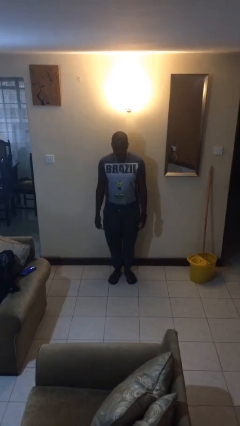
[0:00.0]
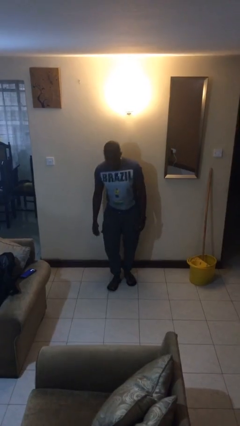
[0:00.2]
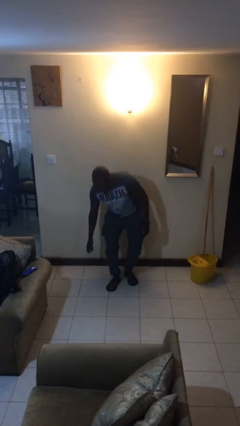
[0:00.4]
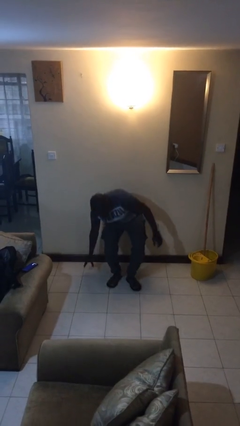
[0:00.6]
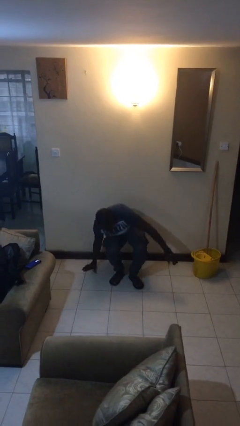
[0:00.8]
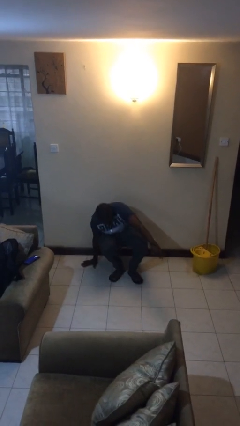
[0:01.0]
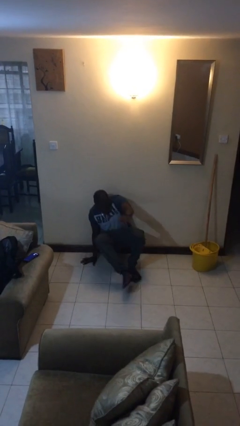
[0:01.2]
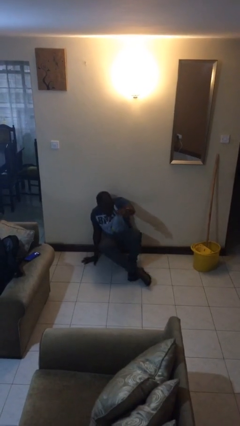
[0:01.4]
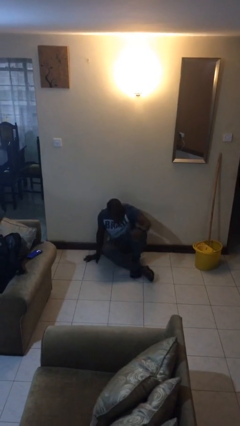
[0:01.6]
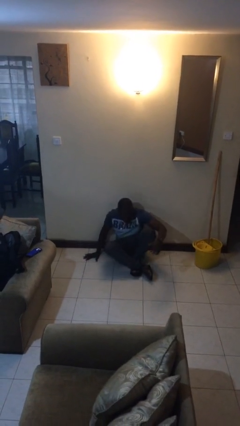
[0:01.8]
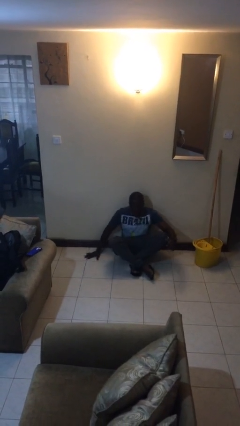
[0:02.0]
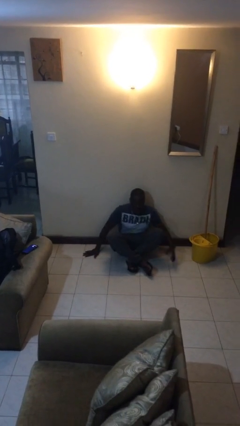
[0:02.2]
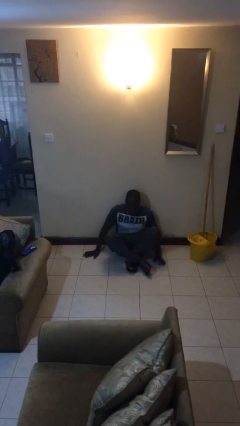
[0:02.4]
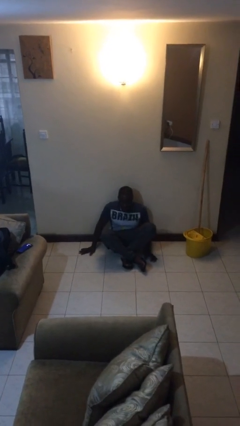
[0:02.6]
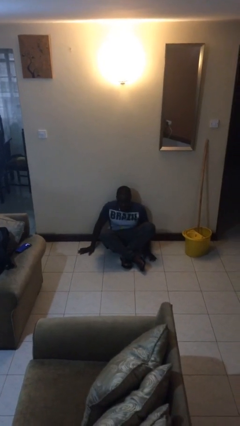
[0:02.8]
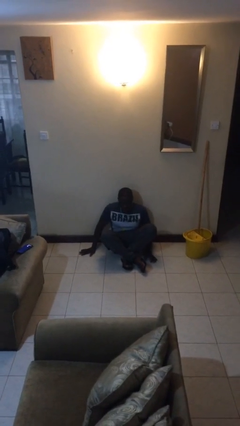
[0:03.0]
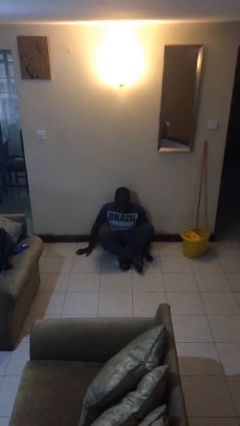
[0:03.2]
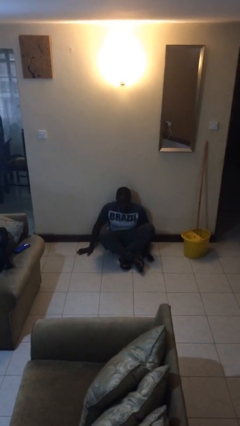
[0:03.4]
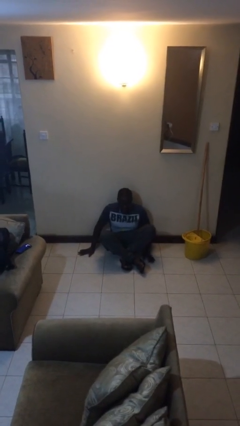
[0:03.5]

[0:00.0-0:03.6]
person sits crisscross

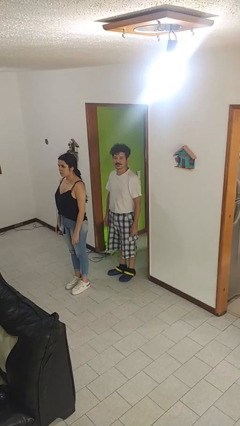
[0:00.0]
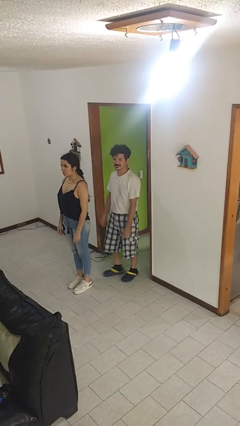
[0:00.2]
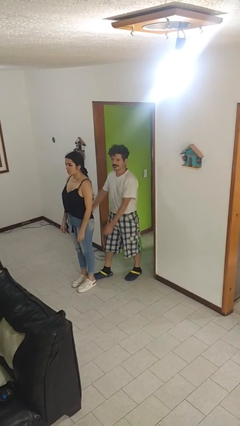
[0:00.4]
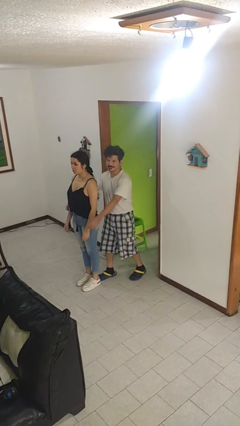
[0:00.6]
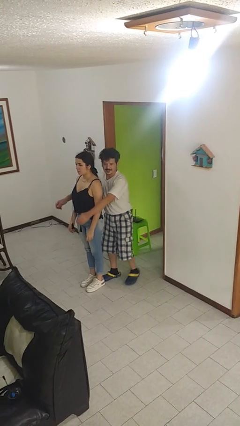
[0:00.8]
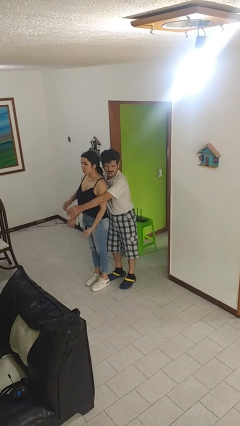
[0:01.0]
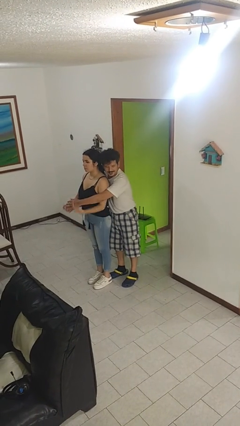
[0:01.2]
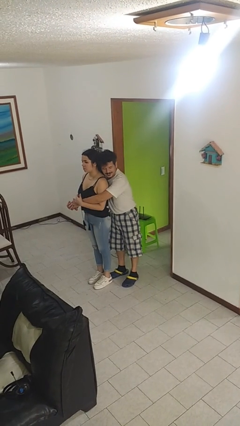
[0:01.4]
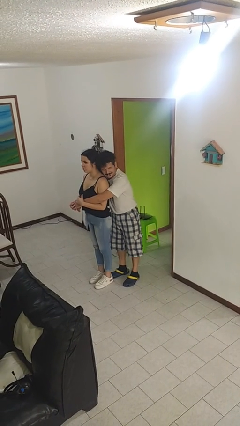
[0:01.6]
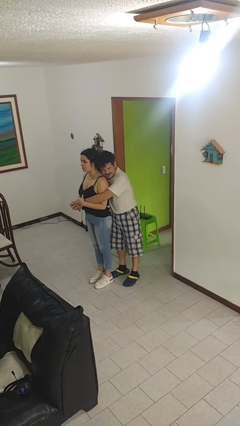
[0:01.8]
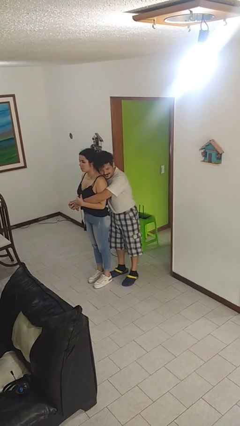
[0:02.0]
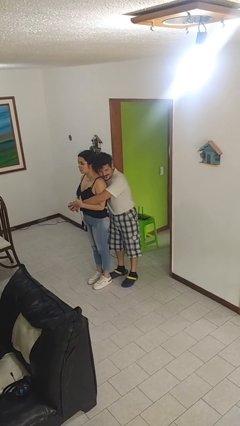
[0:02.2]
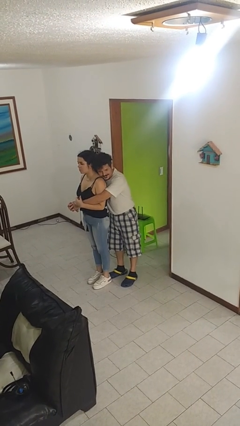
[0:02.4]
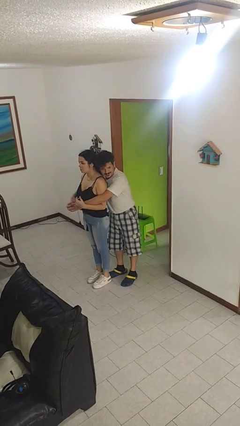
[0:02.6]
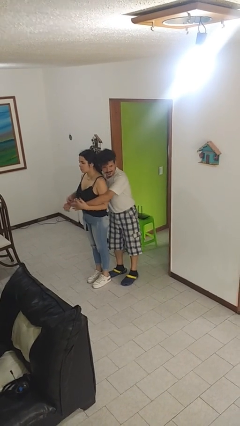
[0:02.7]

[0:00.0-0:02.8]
person hugs person from behind

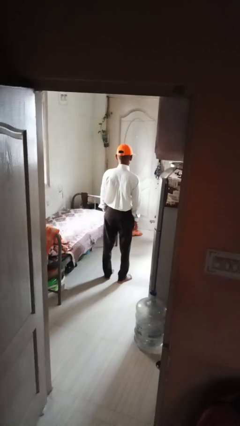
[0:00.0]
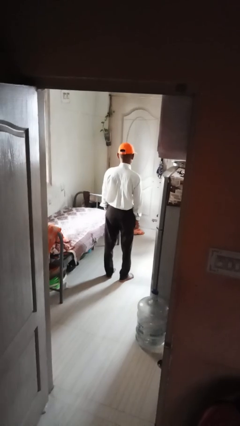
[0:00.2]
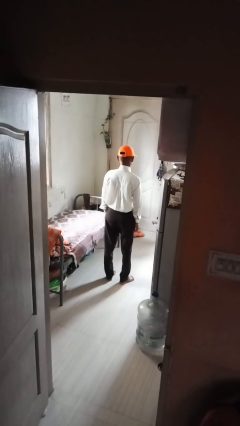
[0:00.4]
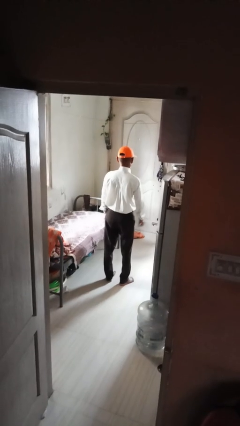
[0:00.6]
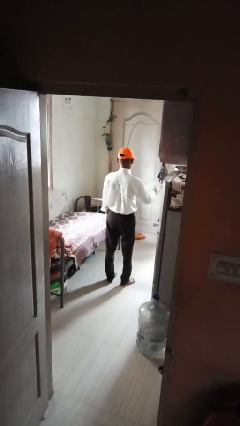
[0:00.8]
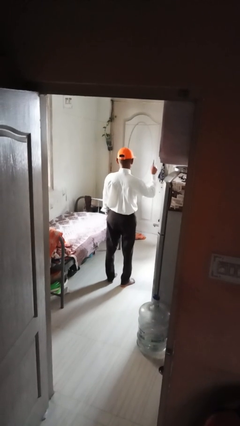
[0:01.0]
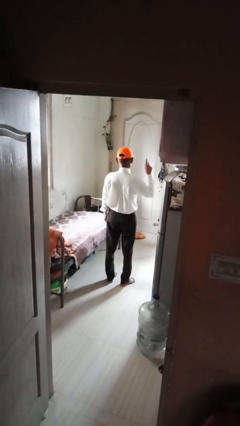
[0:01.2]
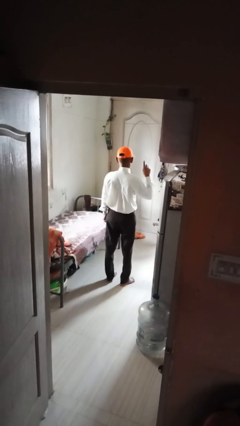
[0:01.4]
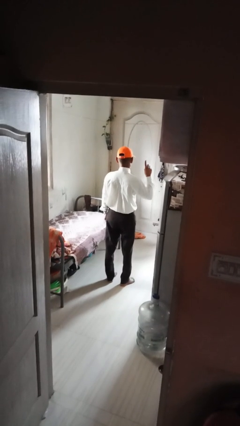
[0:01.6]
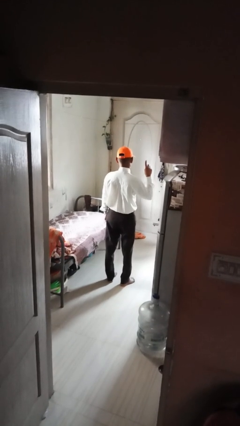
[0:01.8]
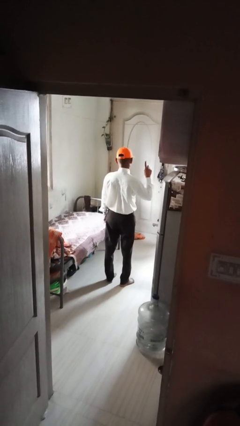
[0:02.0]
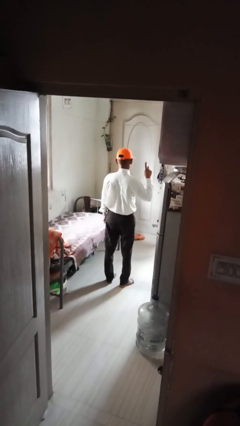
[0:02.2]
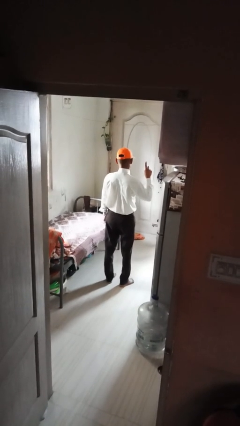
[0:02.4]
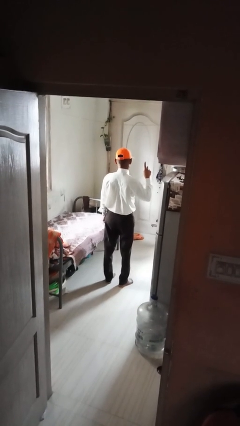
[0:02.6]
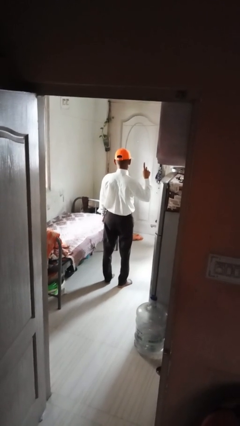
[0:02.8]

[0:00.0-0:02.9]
person gestures number one

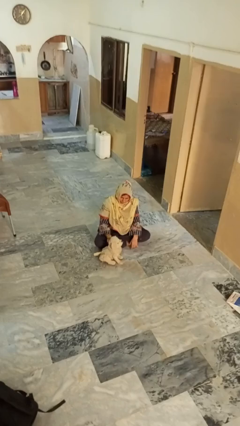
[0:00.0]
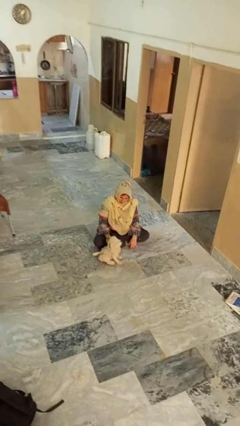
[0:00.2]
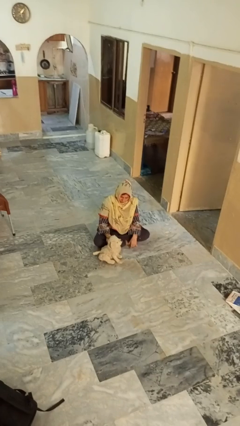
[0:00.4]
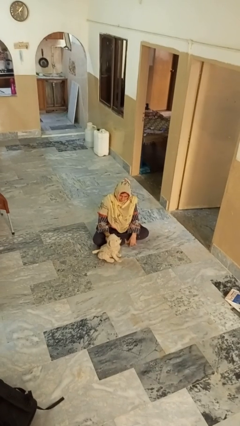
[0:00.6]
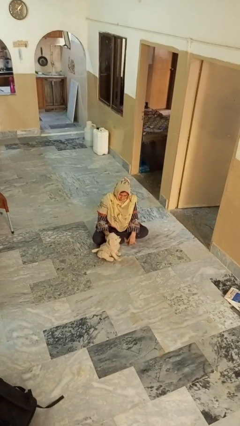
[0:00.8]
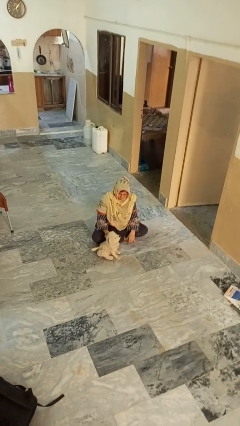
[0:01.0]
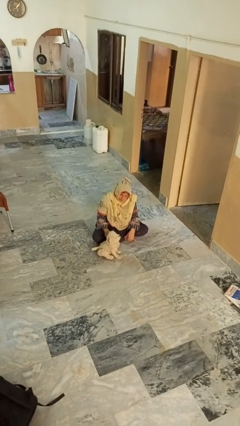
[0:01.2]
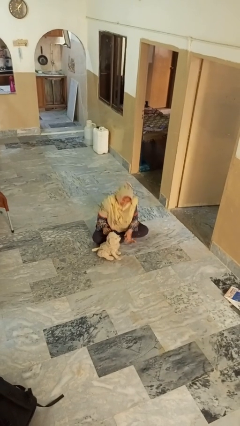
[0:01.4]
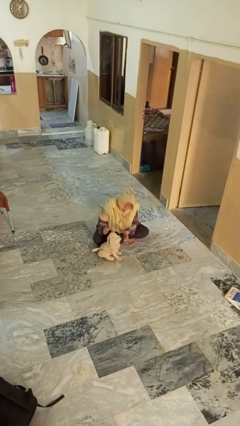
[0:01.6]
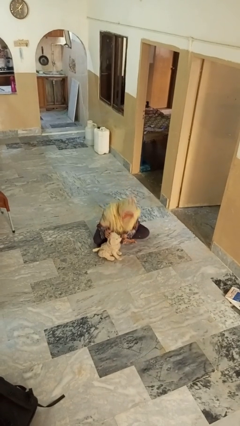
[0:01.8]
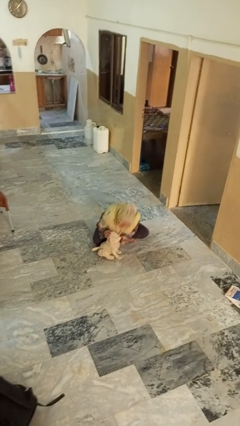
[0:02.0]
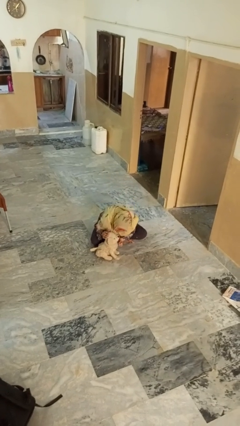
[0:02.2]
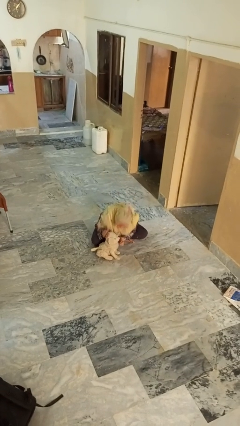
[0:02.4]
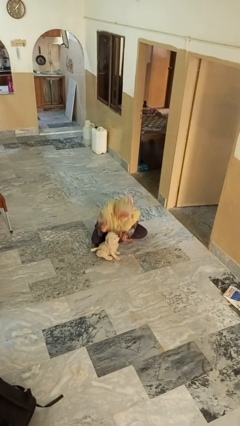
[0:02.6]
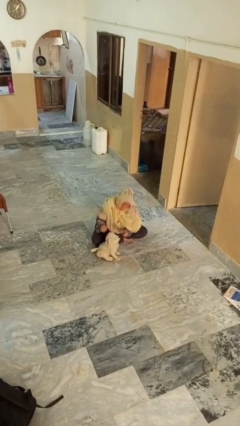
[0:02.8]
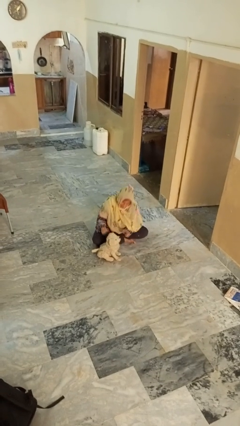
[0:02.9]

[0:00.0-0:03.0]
person pets dog

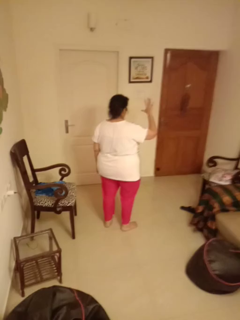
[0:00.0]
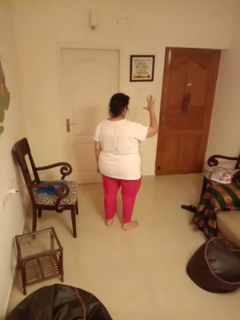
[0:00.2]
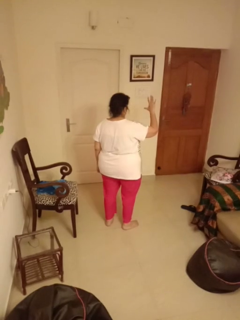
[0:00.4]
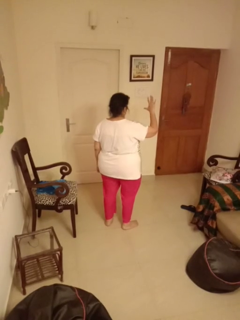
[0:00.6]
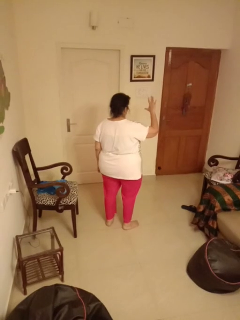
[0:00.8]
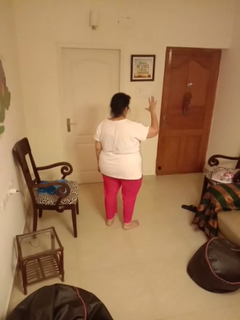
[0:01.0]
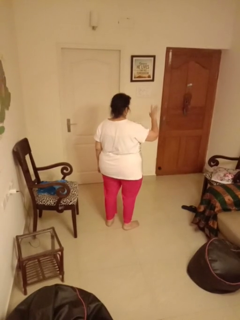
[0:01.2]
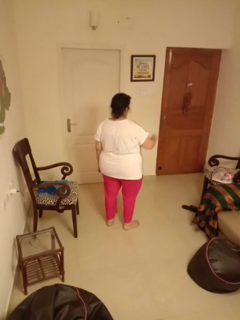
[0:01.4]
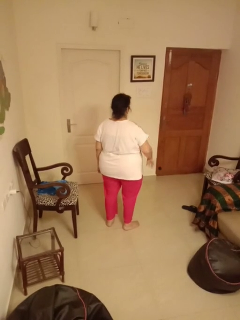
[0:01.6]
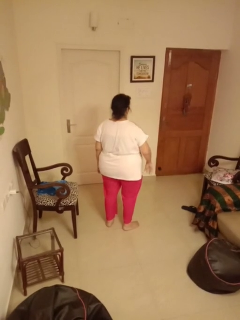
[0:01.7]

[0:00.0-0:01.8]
person gestures number five

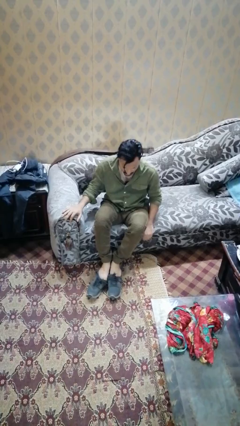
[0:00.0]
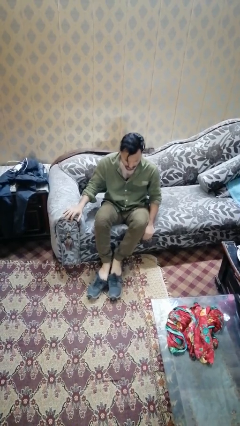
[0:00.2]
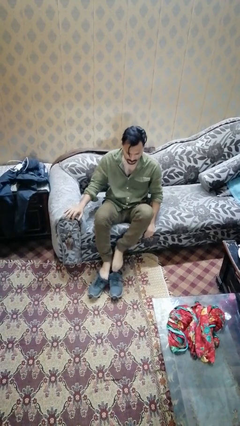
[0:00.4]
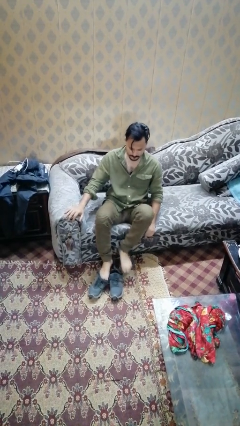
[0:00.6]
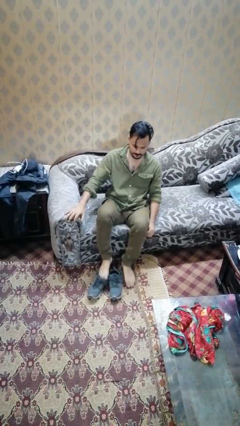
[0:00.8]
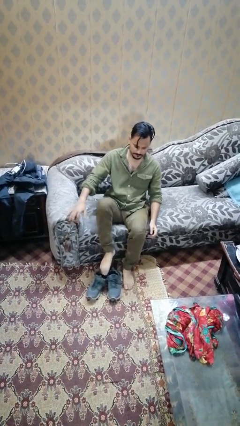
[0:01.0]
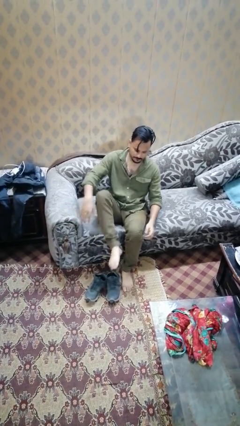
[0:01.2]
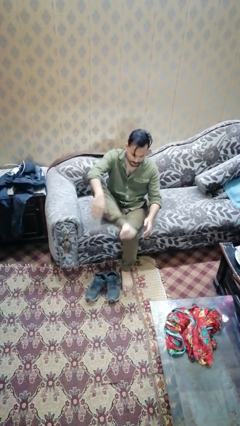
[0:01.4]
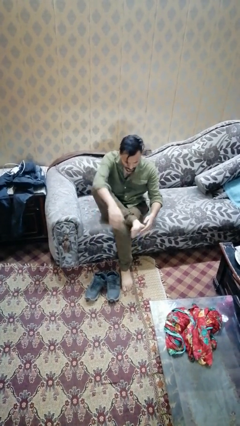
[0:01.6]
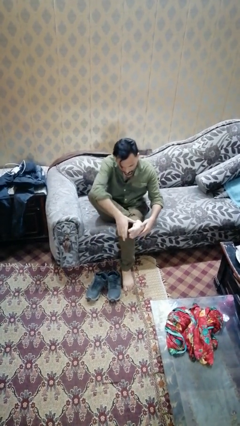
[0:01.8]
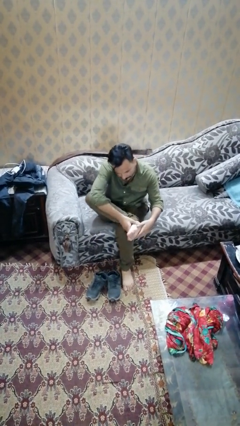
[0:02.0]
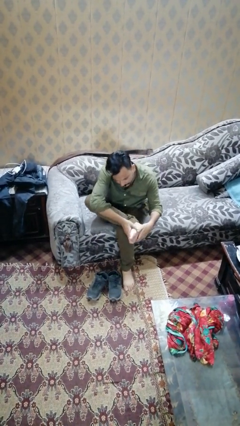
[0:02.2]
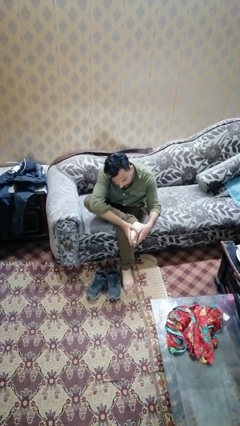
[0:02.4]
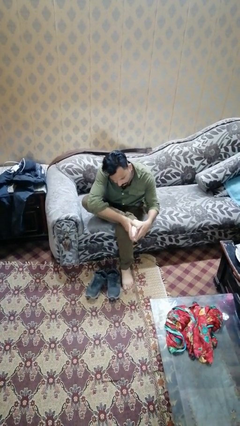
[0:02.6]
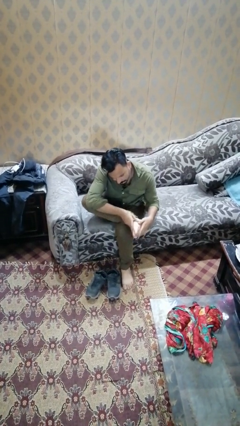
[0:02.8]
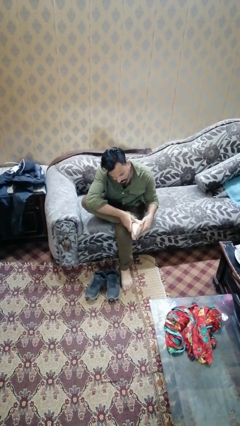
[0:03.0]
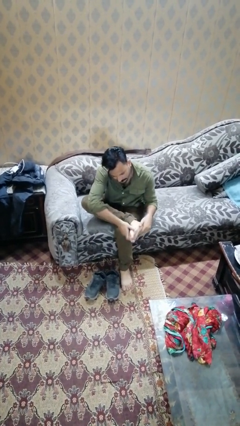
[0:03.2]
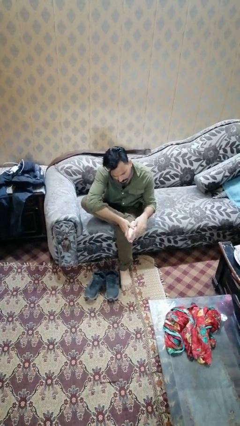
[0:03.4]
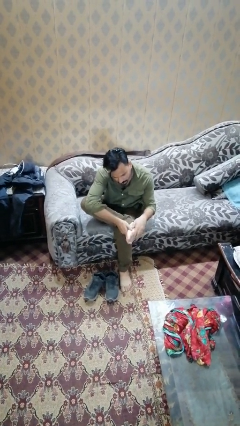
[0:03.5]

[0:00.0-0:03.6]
person rubs foot

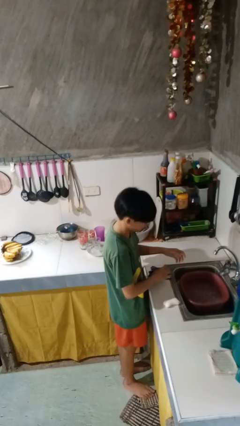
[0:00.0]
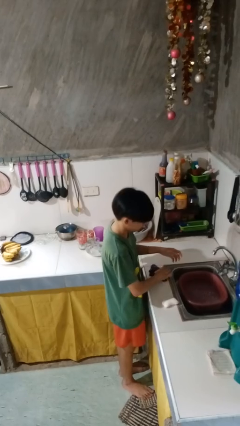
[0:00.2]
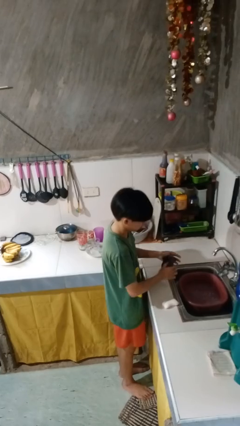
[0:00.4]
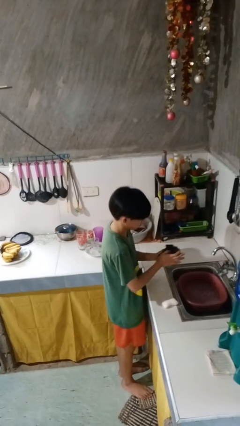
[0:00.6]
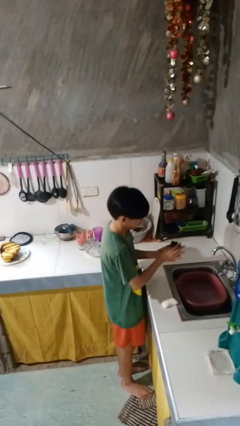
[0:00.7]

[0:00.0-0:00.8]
person dries hands with towel
